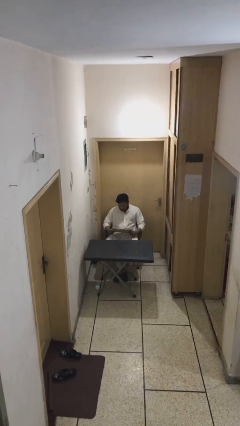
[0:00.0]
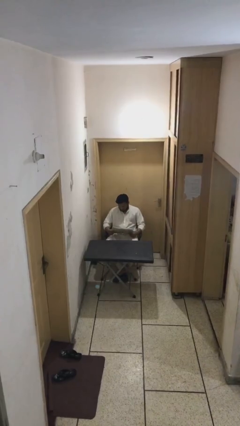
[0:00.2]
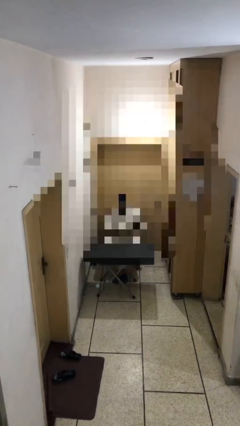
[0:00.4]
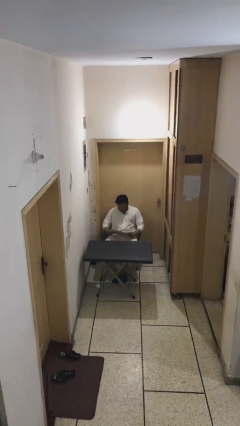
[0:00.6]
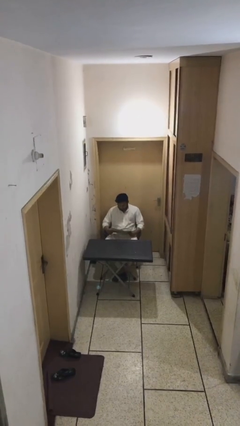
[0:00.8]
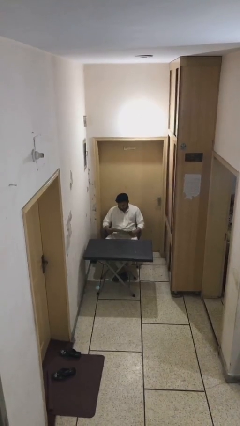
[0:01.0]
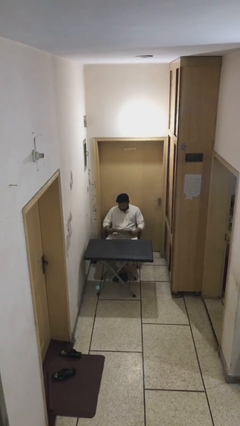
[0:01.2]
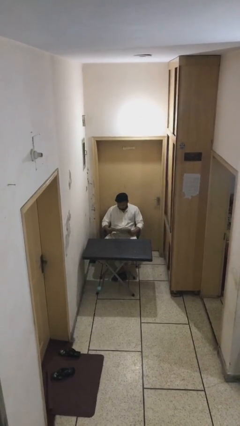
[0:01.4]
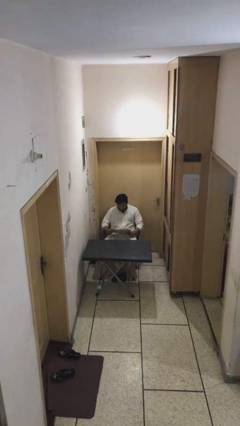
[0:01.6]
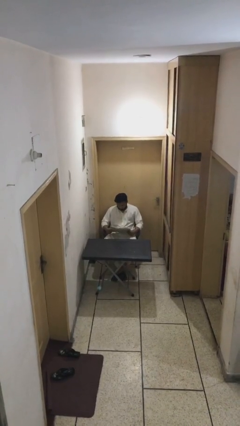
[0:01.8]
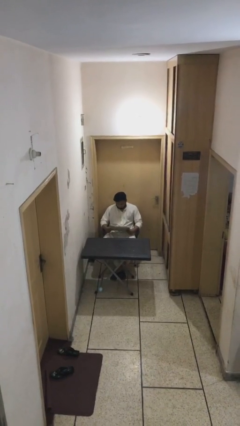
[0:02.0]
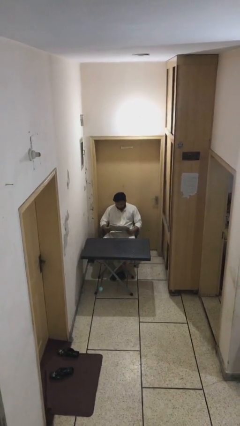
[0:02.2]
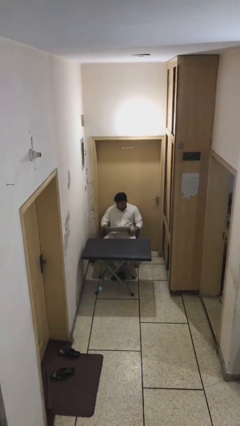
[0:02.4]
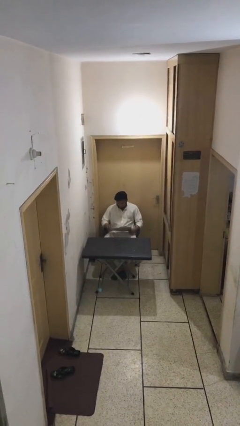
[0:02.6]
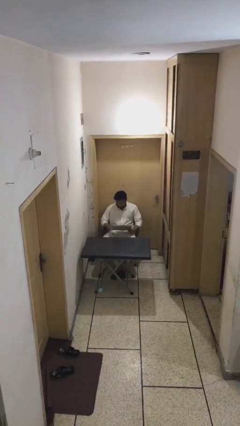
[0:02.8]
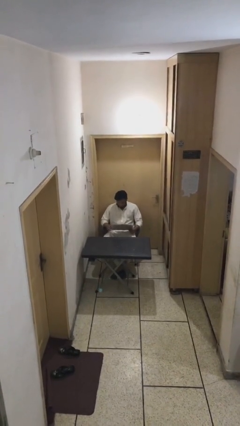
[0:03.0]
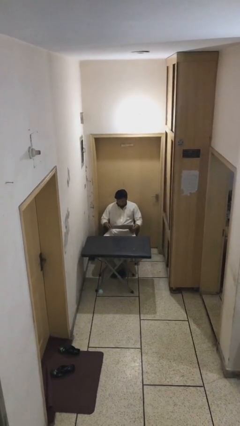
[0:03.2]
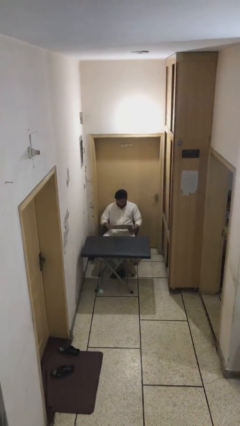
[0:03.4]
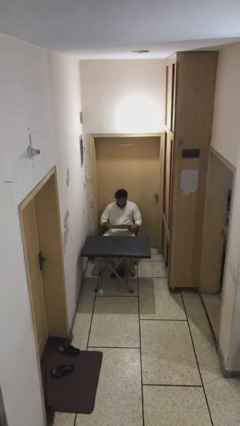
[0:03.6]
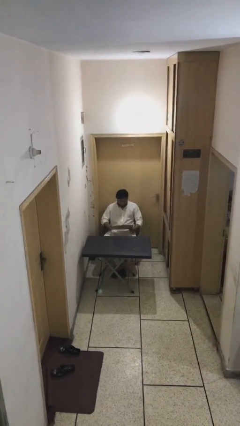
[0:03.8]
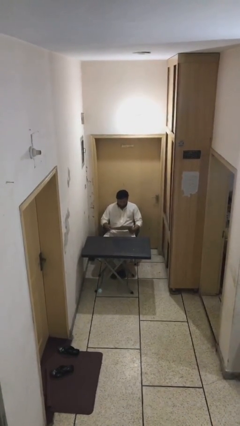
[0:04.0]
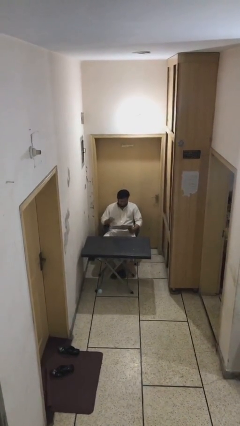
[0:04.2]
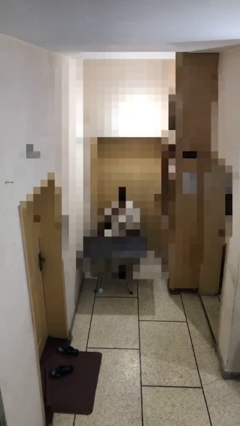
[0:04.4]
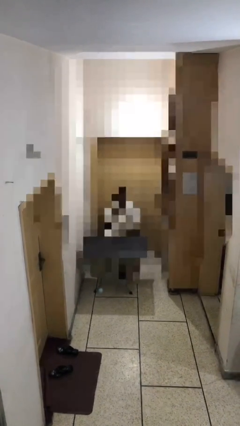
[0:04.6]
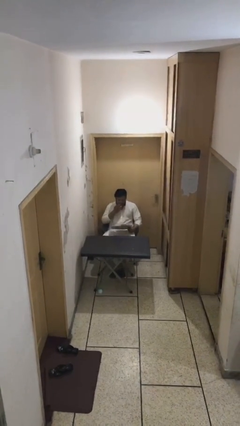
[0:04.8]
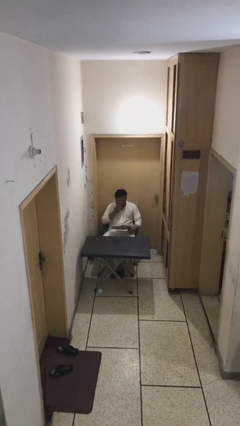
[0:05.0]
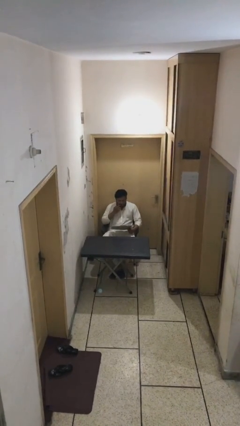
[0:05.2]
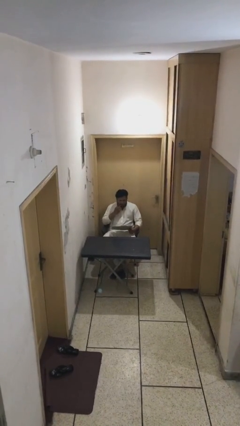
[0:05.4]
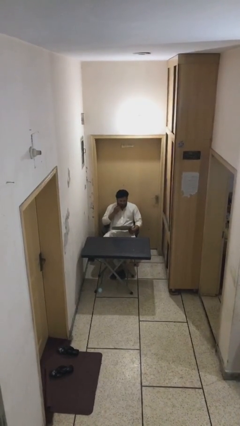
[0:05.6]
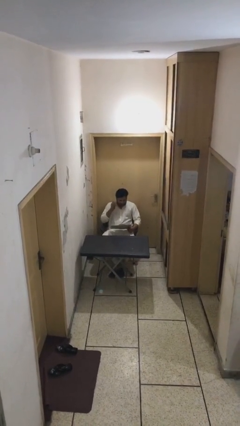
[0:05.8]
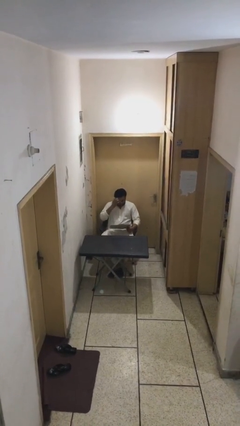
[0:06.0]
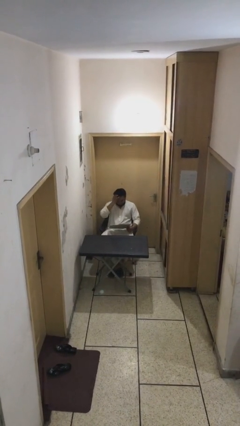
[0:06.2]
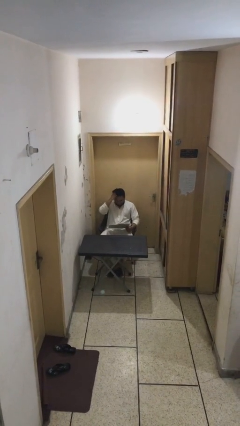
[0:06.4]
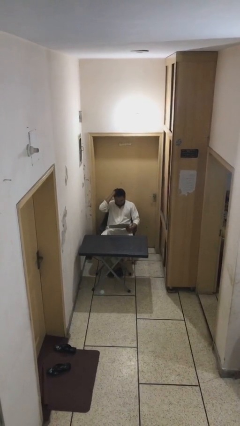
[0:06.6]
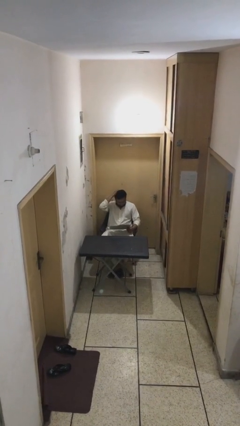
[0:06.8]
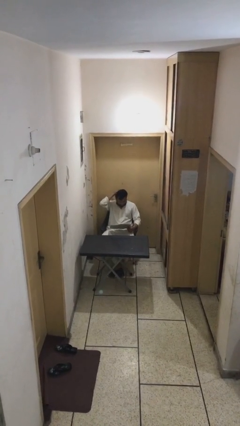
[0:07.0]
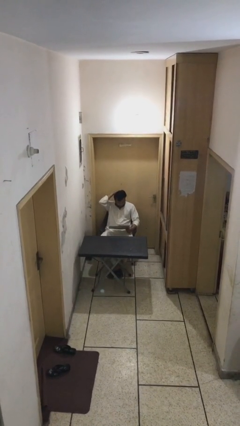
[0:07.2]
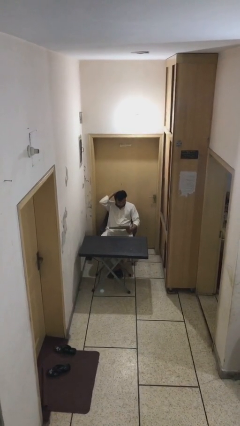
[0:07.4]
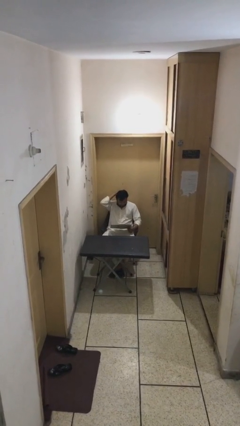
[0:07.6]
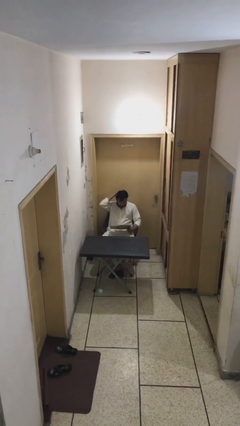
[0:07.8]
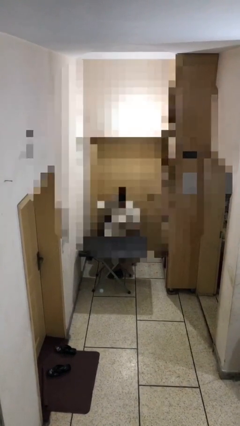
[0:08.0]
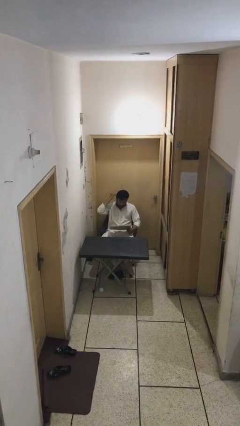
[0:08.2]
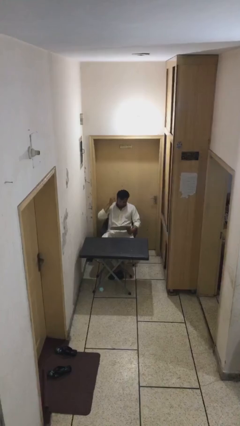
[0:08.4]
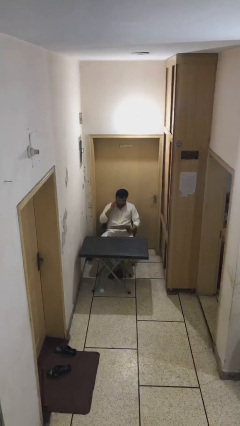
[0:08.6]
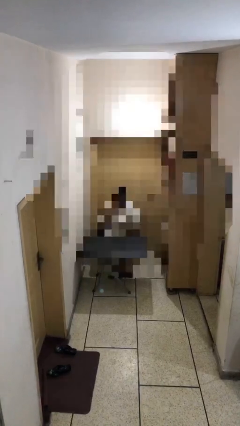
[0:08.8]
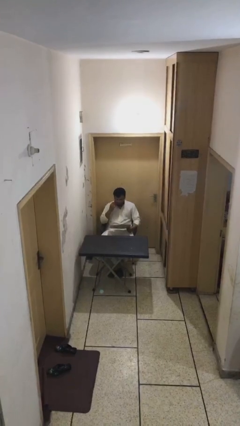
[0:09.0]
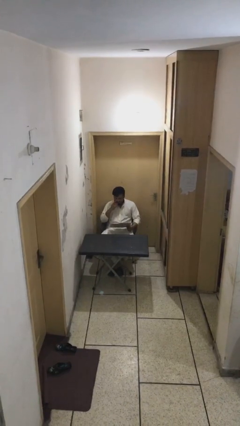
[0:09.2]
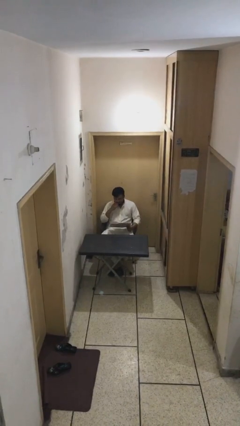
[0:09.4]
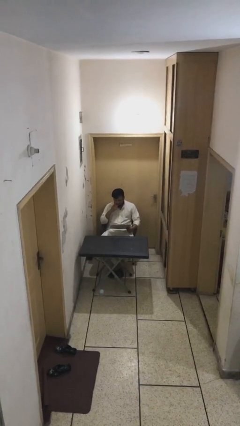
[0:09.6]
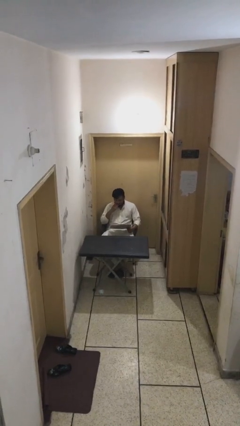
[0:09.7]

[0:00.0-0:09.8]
person reads document

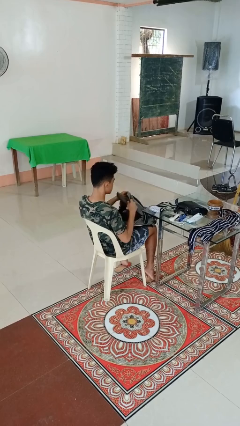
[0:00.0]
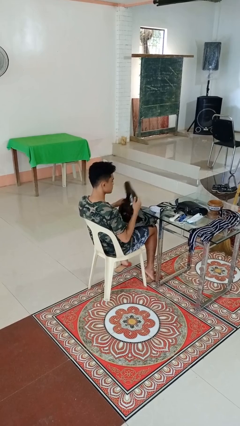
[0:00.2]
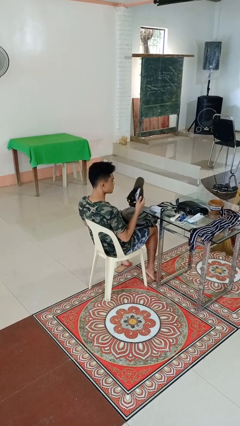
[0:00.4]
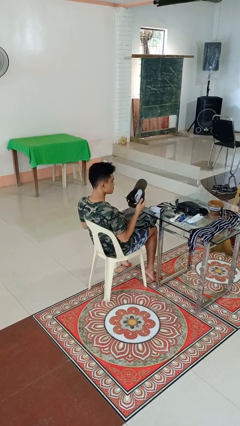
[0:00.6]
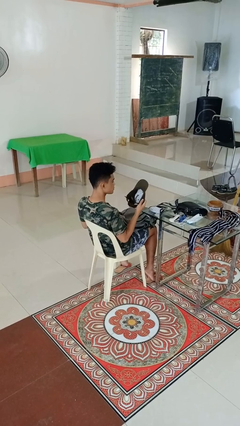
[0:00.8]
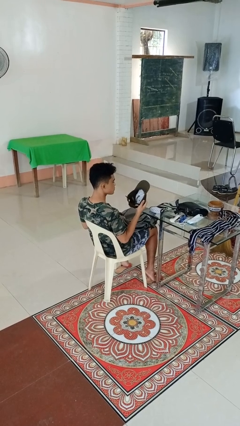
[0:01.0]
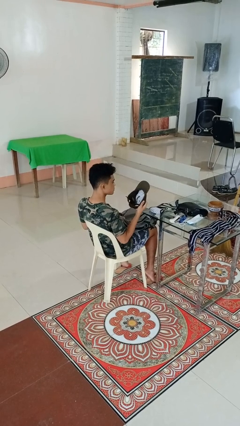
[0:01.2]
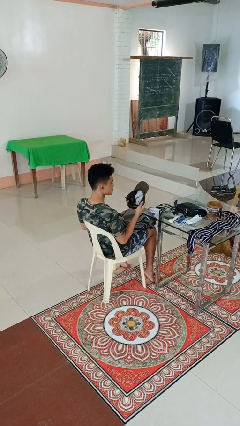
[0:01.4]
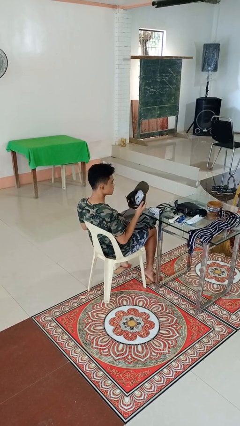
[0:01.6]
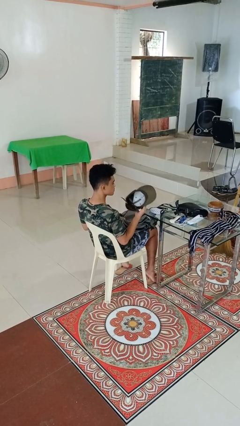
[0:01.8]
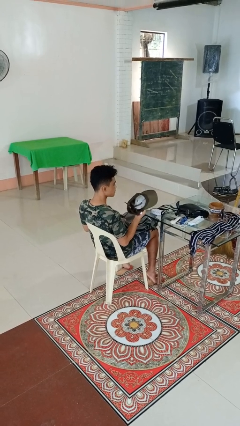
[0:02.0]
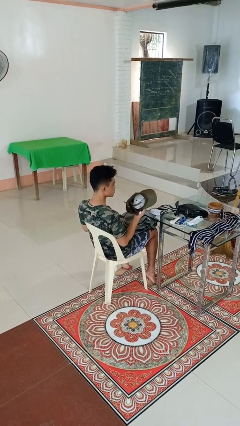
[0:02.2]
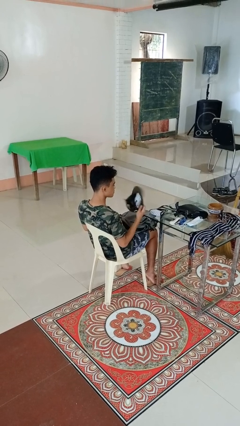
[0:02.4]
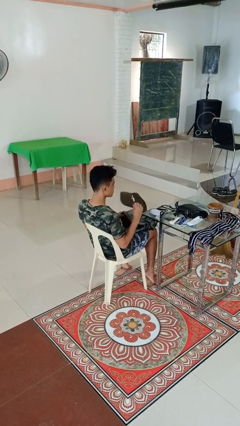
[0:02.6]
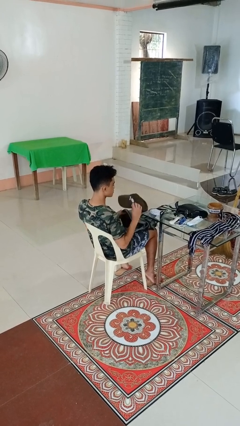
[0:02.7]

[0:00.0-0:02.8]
person takes object from backpack

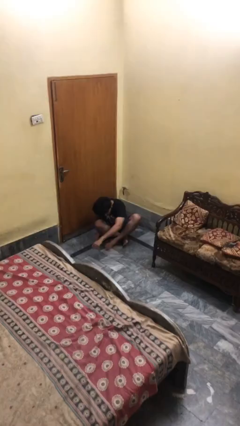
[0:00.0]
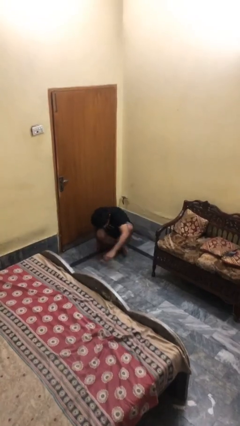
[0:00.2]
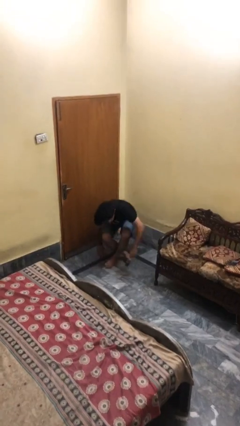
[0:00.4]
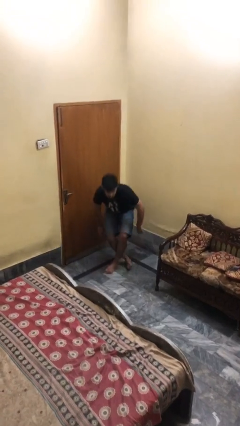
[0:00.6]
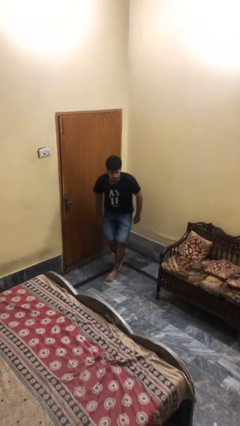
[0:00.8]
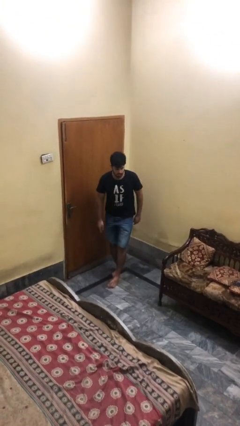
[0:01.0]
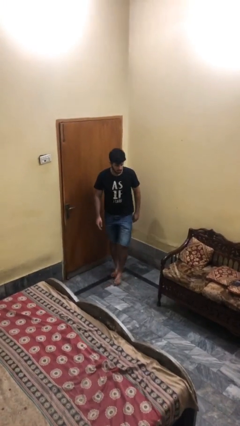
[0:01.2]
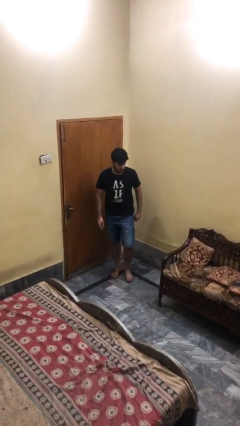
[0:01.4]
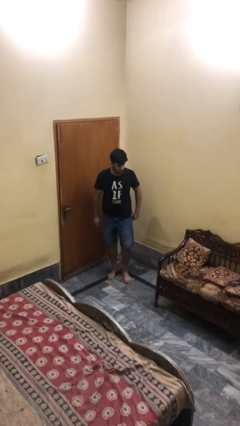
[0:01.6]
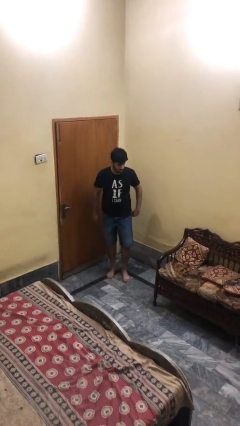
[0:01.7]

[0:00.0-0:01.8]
person stands up from floor

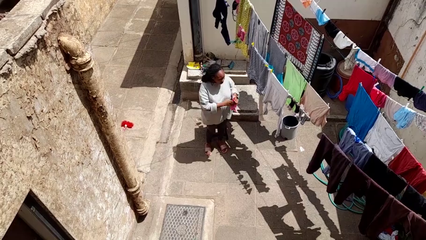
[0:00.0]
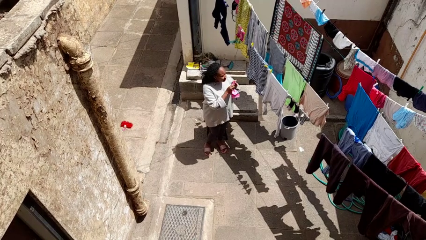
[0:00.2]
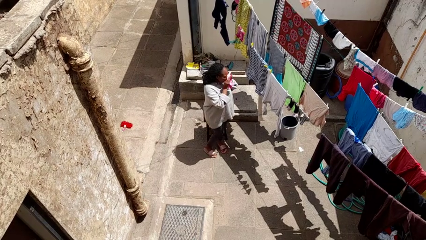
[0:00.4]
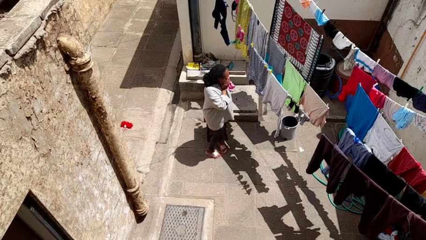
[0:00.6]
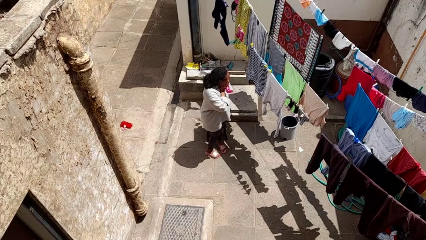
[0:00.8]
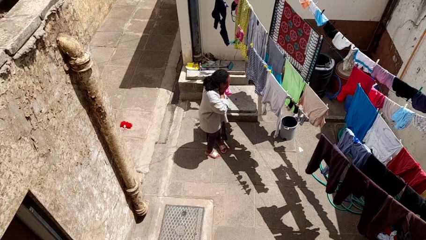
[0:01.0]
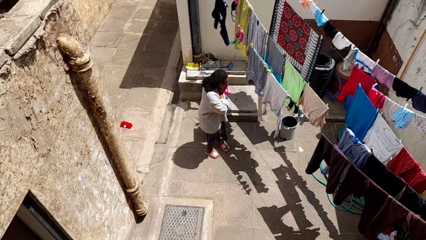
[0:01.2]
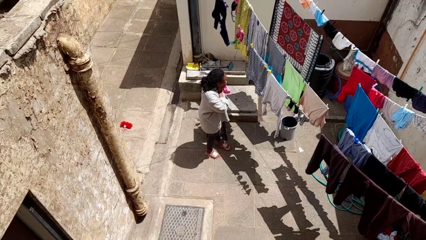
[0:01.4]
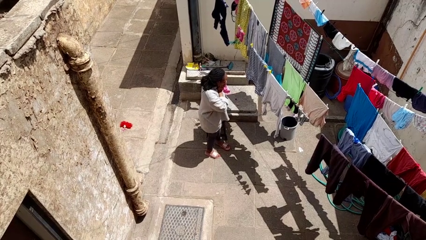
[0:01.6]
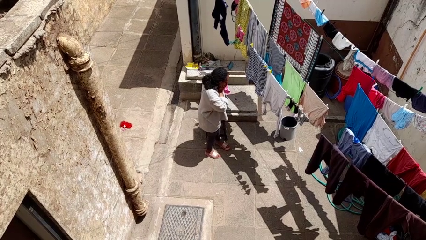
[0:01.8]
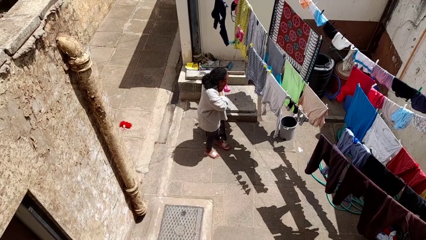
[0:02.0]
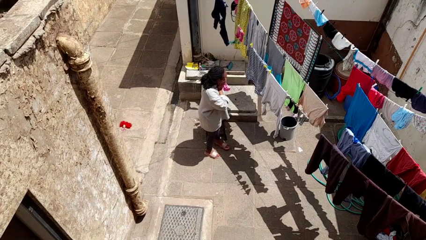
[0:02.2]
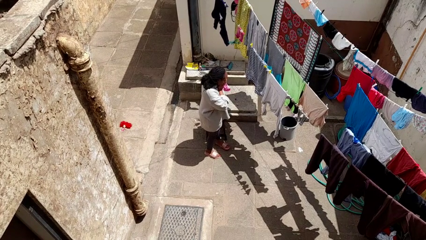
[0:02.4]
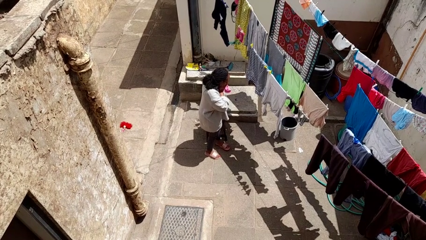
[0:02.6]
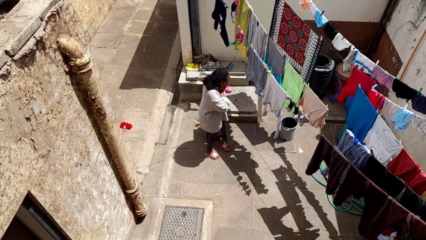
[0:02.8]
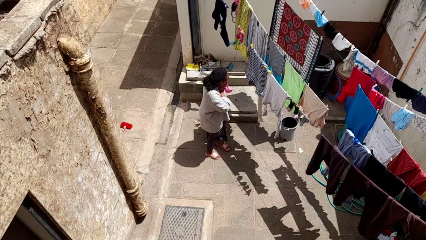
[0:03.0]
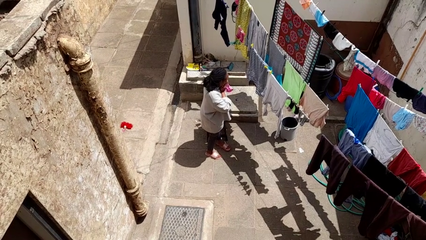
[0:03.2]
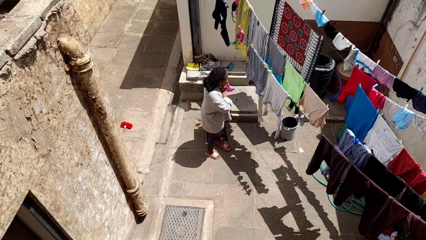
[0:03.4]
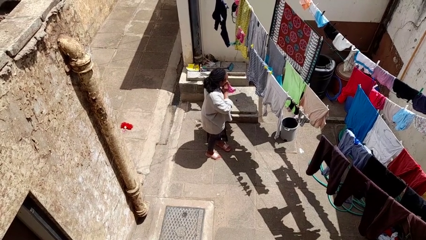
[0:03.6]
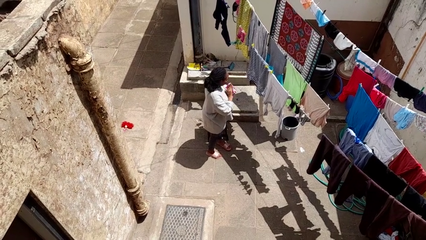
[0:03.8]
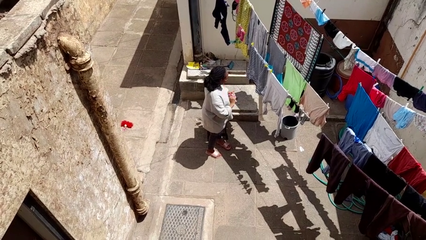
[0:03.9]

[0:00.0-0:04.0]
person blows nose
